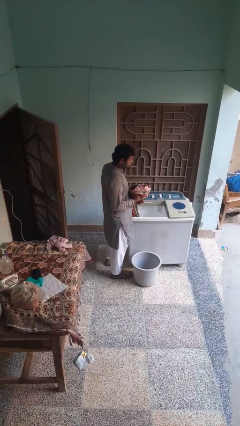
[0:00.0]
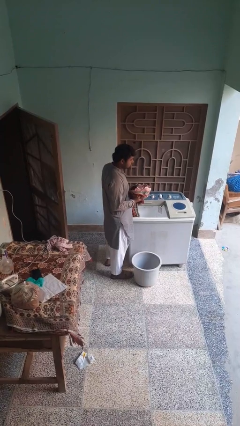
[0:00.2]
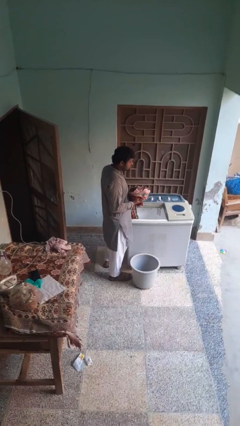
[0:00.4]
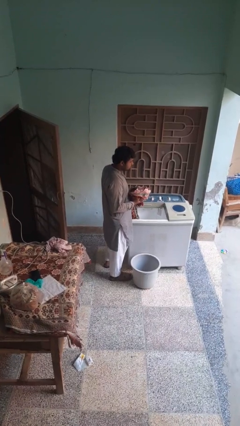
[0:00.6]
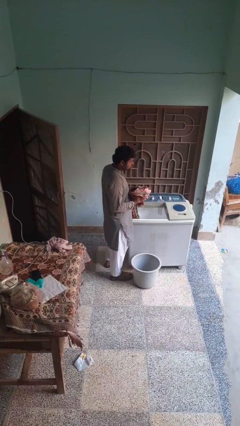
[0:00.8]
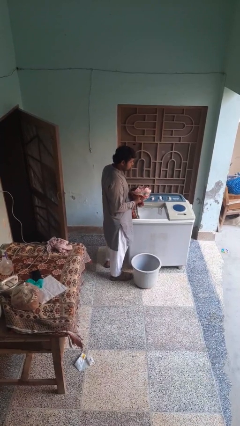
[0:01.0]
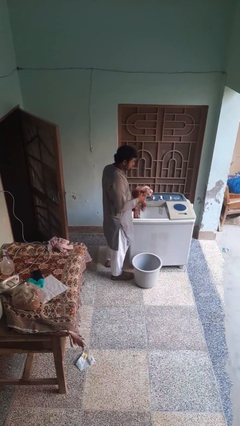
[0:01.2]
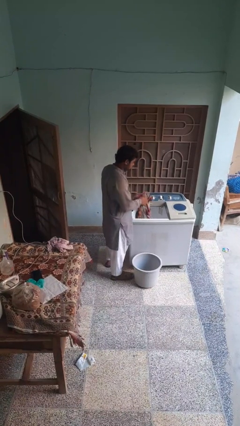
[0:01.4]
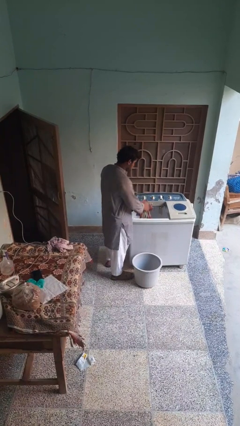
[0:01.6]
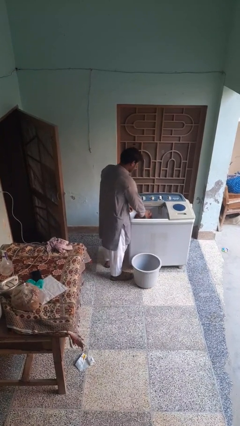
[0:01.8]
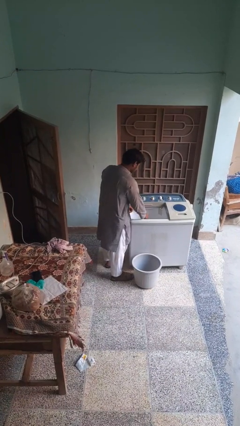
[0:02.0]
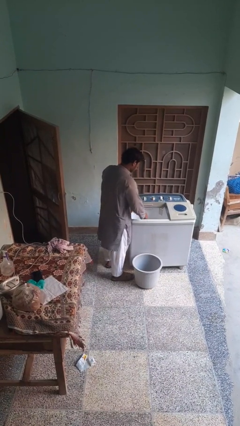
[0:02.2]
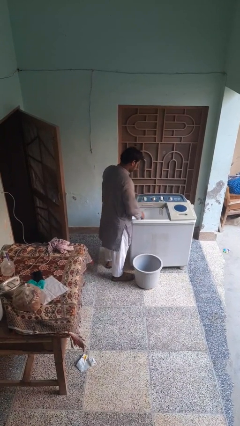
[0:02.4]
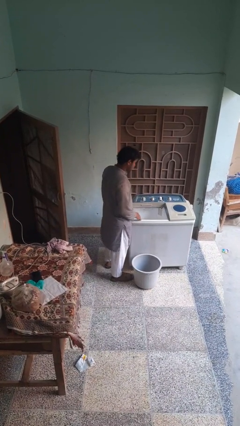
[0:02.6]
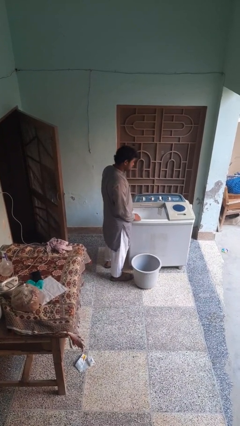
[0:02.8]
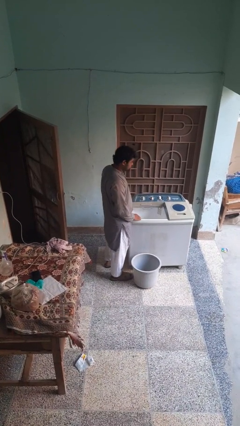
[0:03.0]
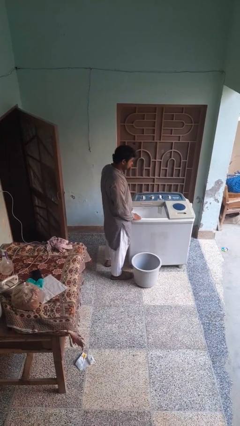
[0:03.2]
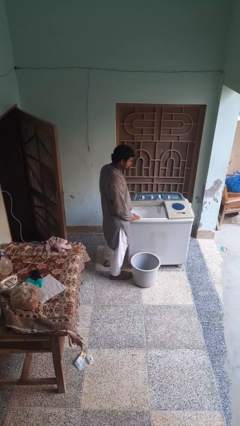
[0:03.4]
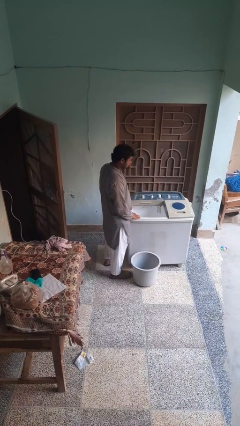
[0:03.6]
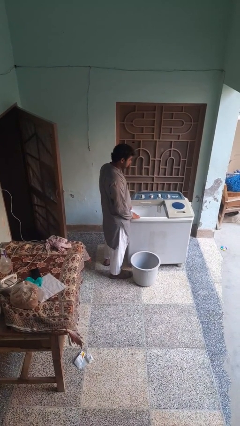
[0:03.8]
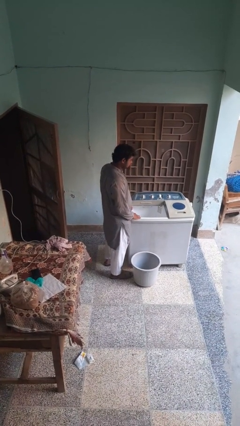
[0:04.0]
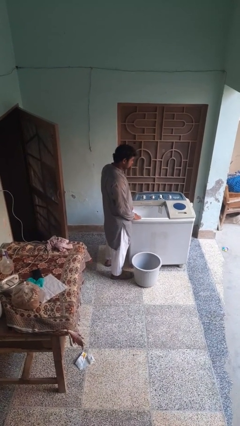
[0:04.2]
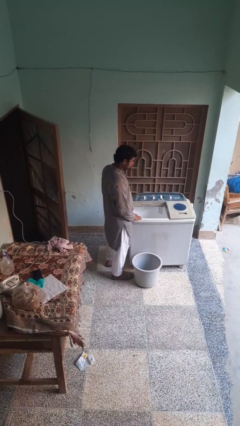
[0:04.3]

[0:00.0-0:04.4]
person loads clotheswasher

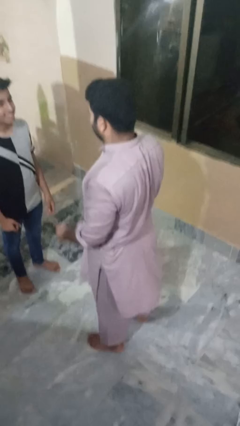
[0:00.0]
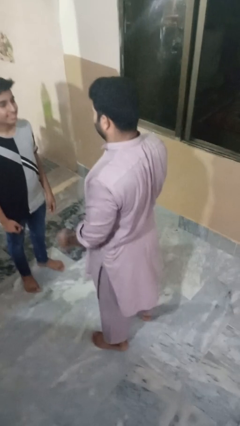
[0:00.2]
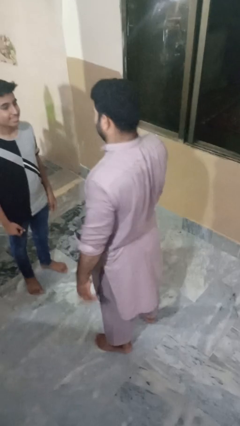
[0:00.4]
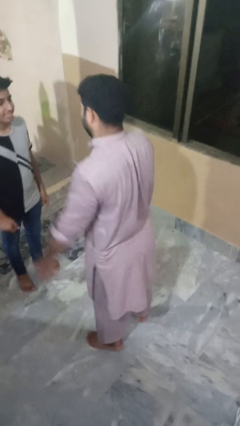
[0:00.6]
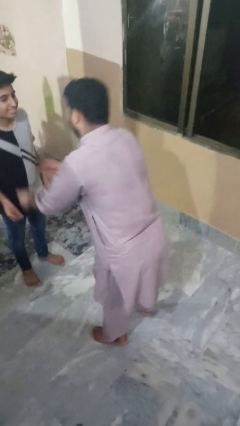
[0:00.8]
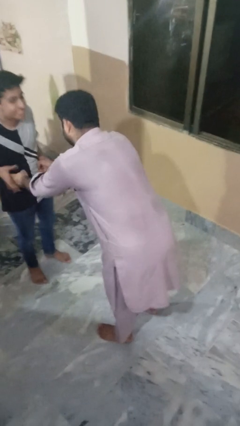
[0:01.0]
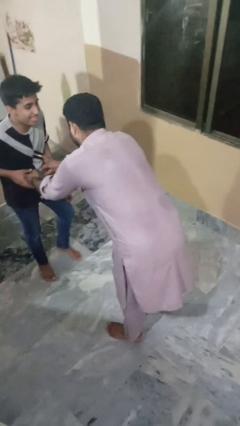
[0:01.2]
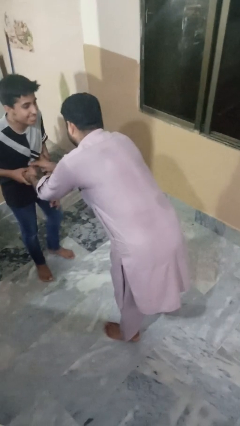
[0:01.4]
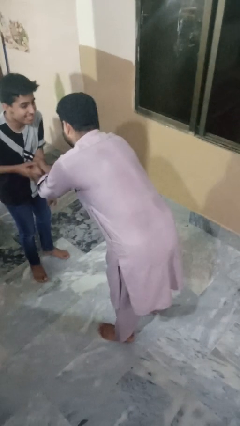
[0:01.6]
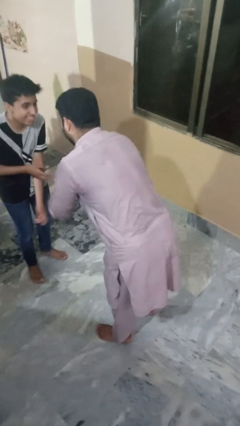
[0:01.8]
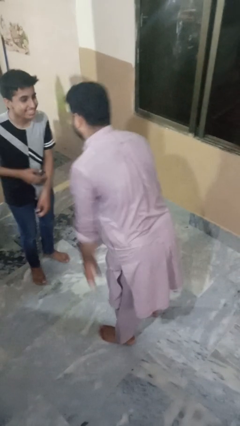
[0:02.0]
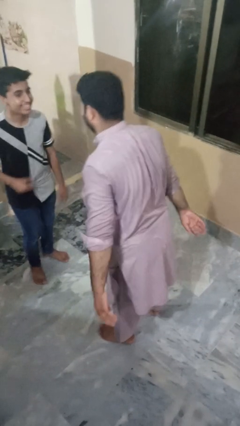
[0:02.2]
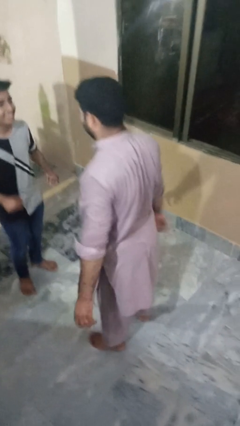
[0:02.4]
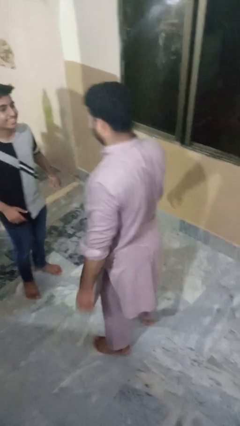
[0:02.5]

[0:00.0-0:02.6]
person tickles person

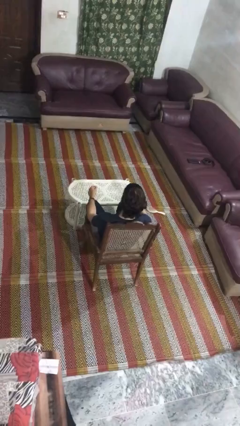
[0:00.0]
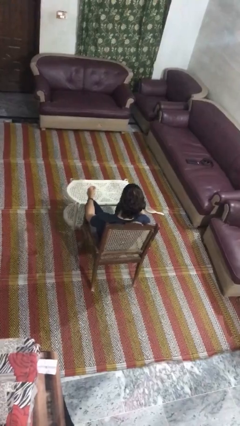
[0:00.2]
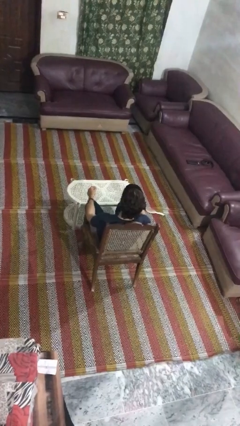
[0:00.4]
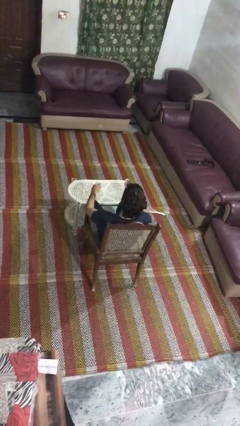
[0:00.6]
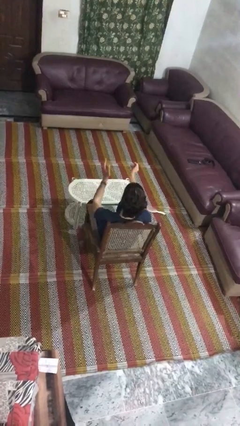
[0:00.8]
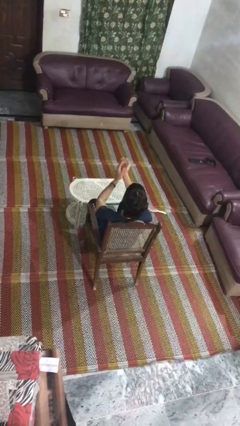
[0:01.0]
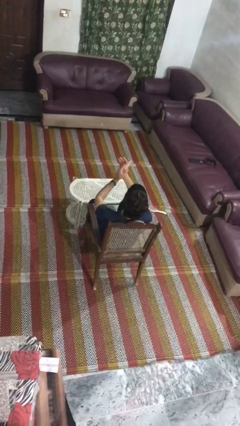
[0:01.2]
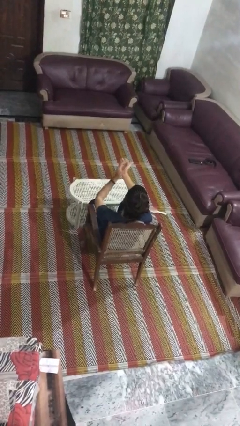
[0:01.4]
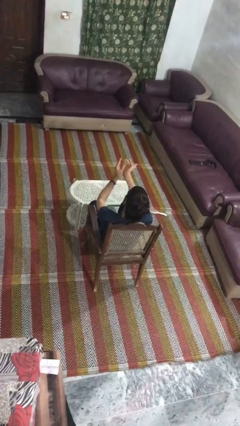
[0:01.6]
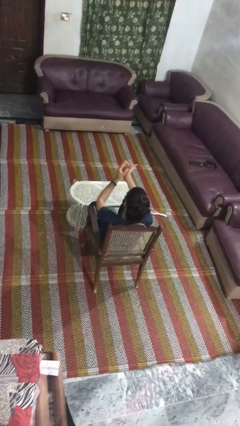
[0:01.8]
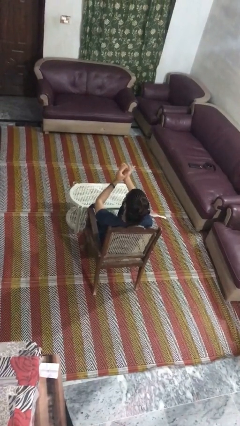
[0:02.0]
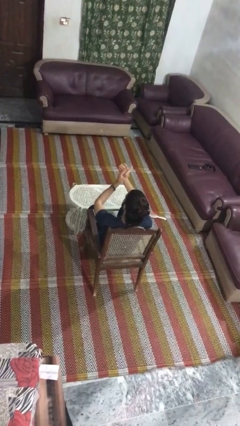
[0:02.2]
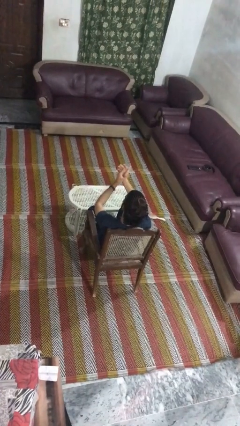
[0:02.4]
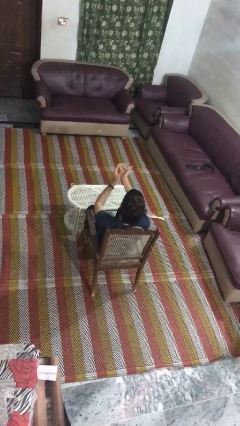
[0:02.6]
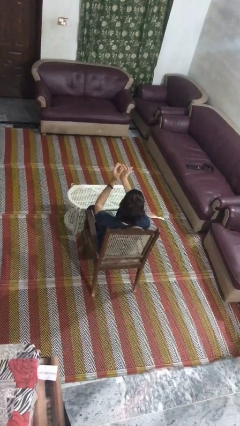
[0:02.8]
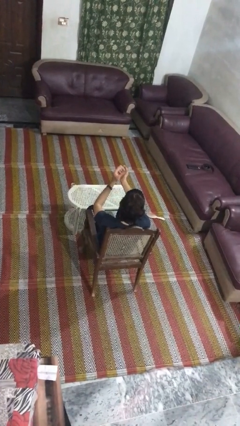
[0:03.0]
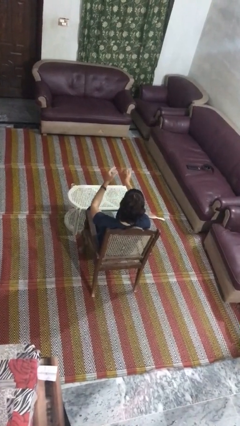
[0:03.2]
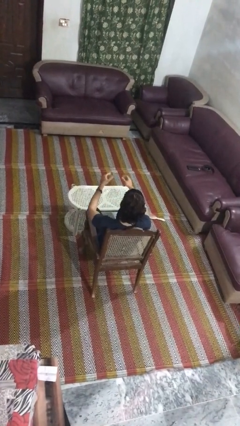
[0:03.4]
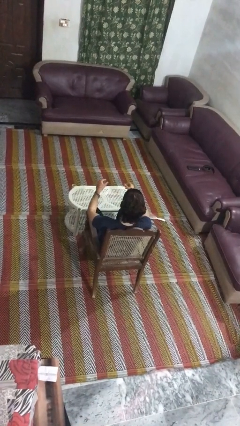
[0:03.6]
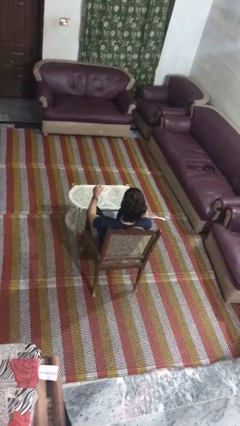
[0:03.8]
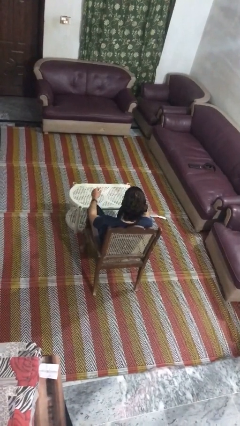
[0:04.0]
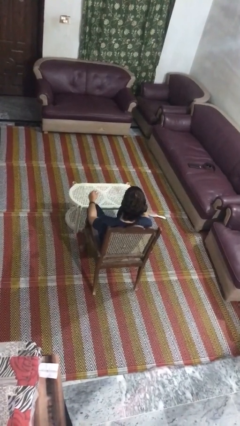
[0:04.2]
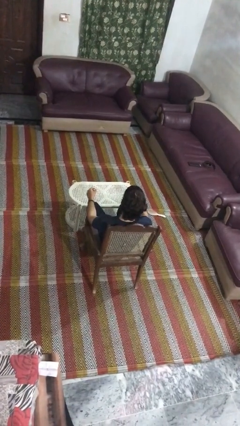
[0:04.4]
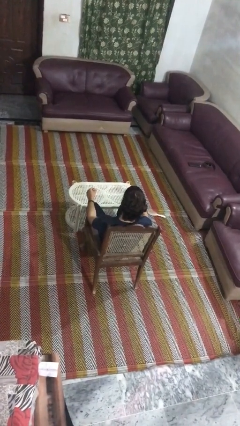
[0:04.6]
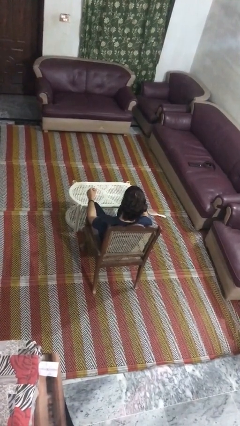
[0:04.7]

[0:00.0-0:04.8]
person claps hands

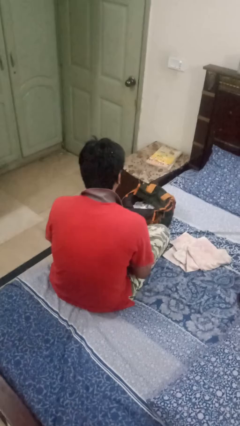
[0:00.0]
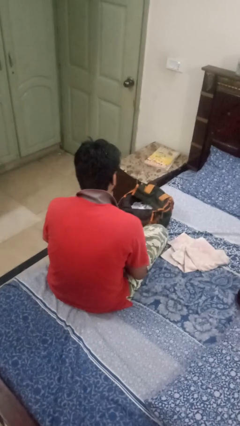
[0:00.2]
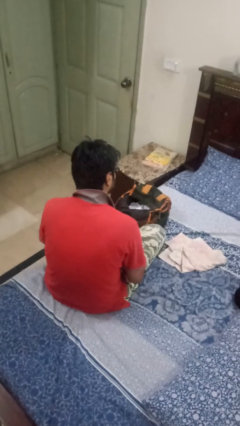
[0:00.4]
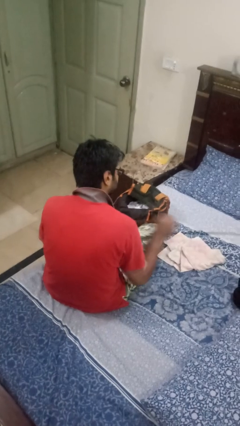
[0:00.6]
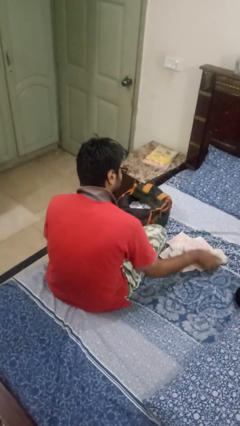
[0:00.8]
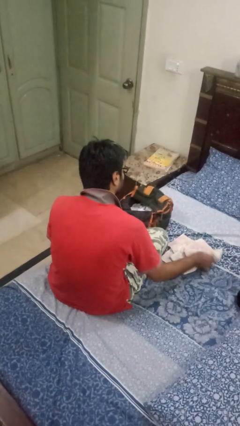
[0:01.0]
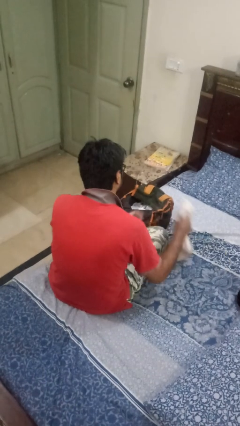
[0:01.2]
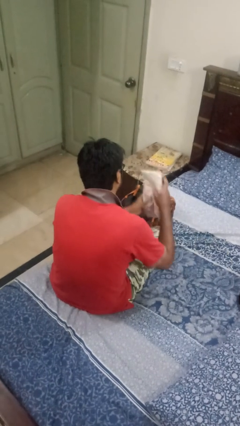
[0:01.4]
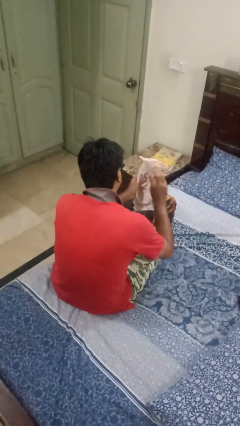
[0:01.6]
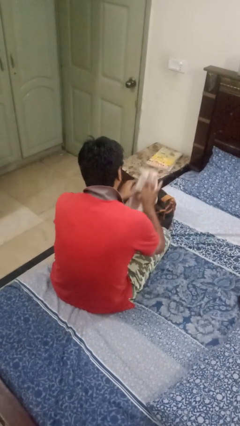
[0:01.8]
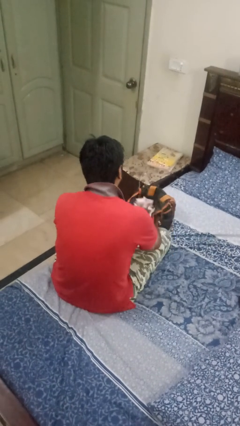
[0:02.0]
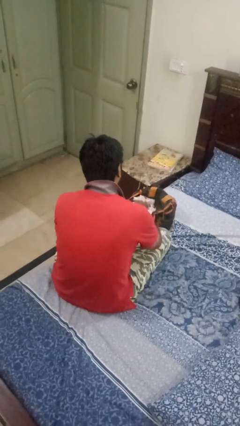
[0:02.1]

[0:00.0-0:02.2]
person puts object into bag

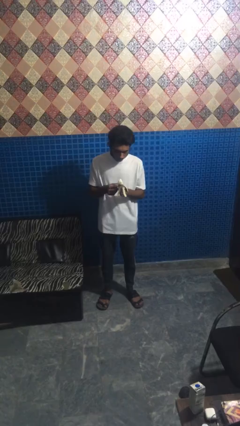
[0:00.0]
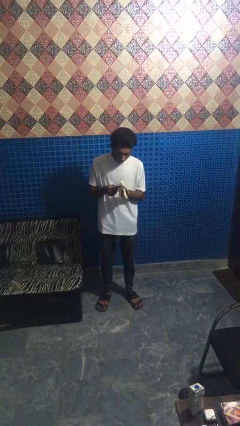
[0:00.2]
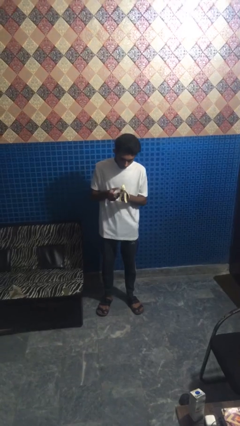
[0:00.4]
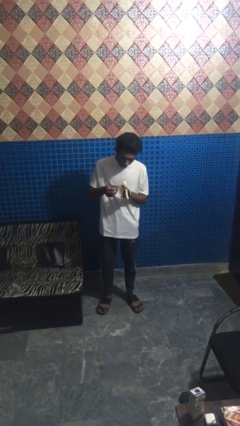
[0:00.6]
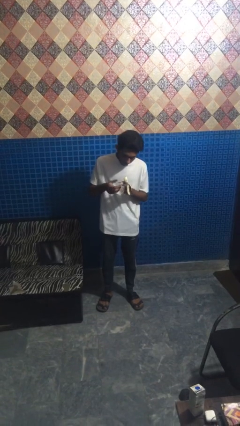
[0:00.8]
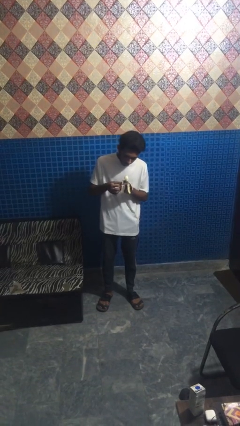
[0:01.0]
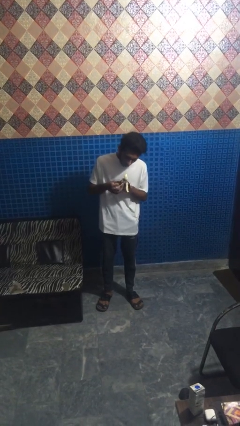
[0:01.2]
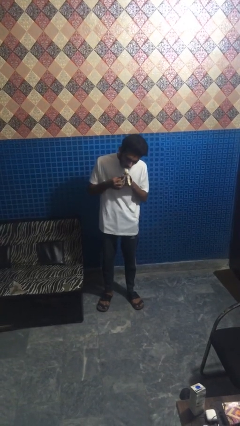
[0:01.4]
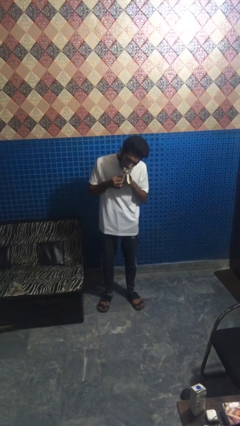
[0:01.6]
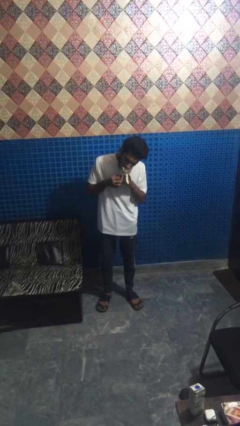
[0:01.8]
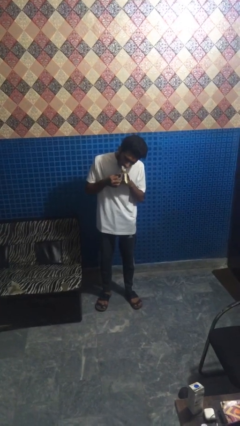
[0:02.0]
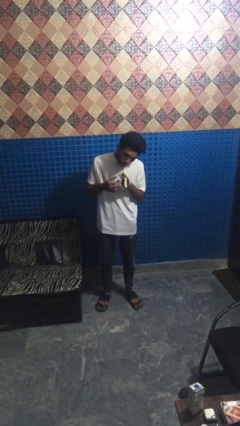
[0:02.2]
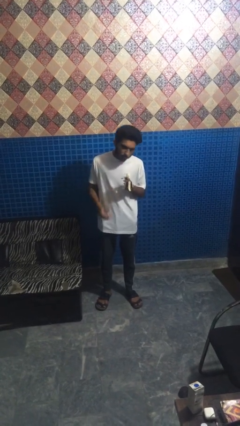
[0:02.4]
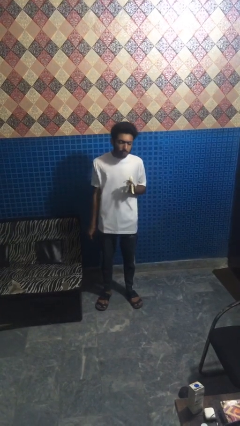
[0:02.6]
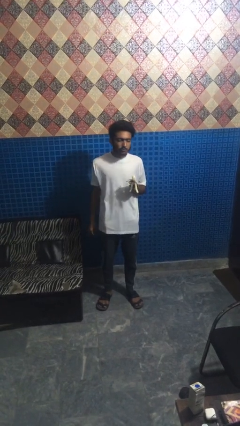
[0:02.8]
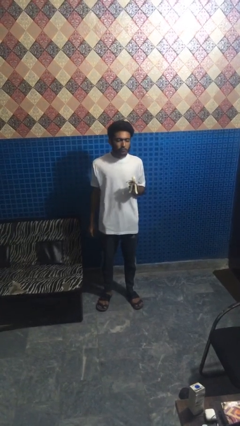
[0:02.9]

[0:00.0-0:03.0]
person eats banana

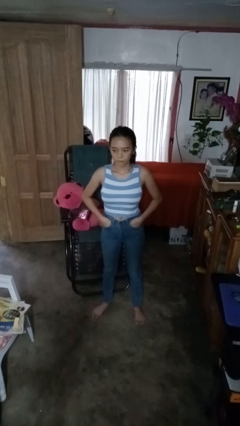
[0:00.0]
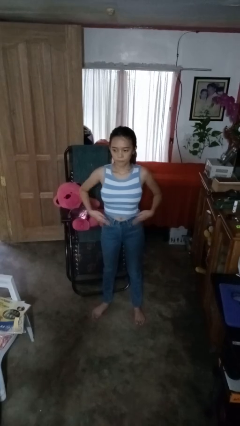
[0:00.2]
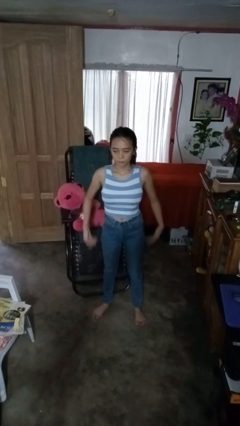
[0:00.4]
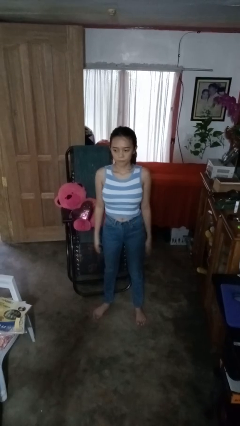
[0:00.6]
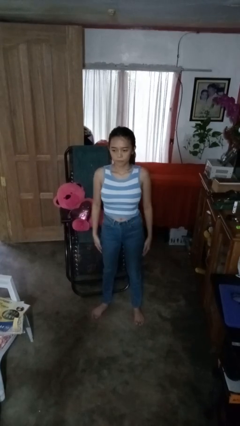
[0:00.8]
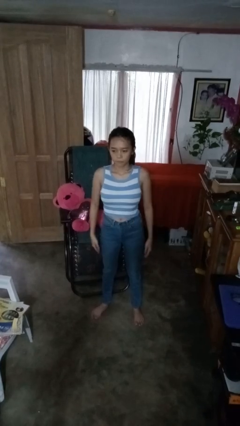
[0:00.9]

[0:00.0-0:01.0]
person puts hands in back pockets
